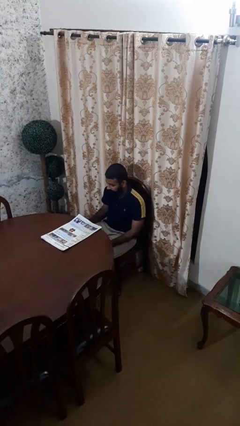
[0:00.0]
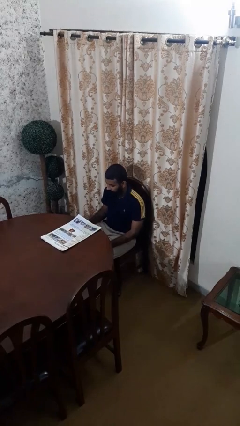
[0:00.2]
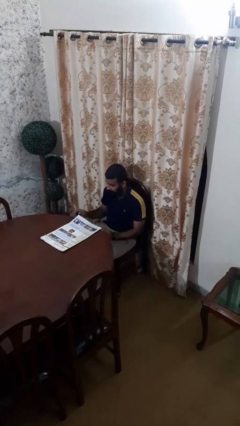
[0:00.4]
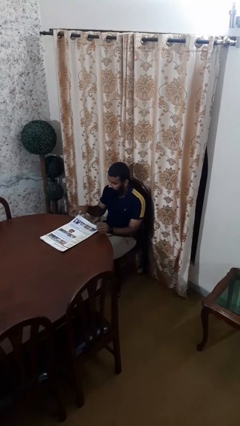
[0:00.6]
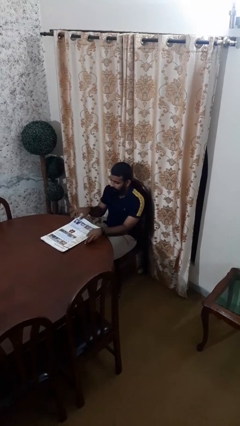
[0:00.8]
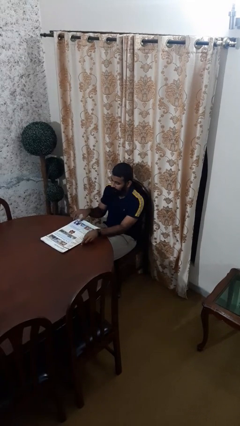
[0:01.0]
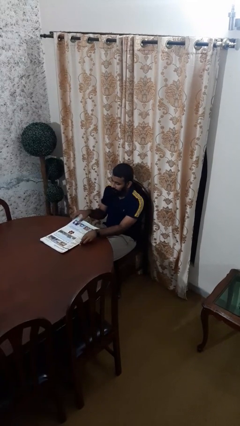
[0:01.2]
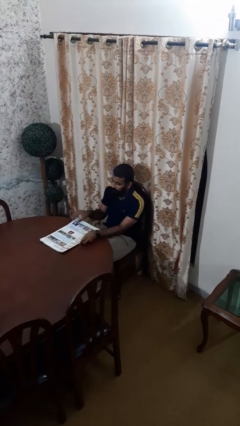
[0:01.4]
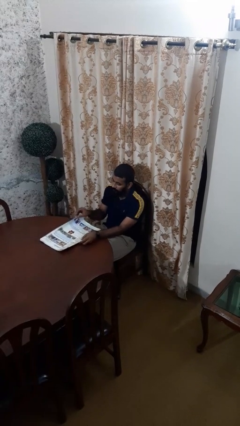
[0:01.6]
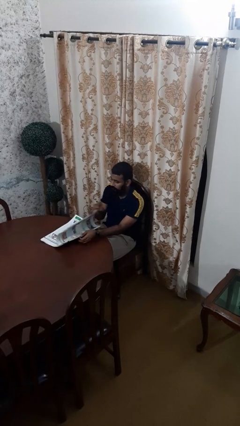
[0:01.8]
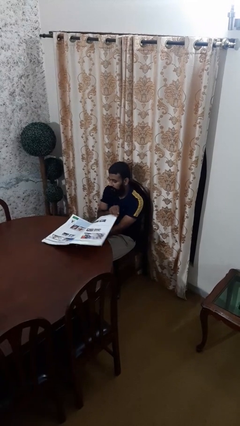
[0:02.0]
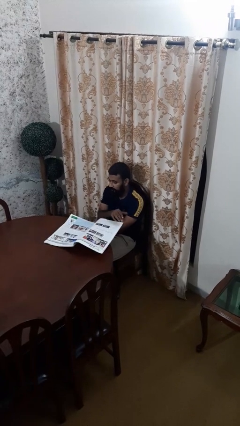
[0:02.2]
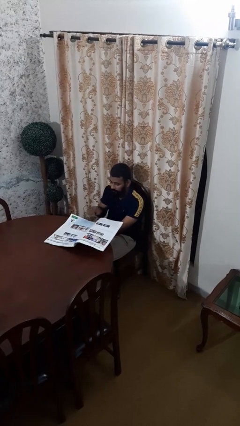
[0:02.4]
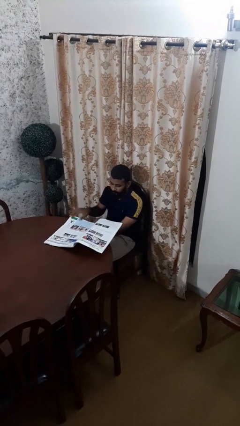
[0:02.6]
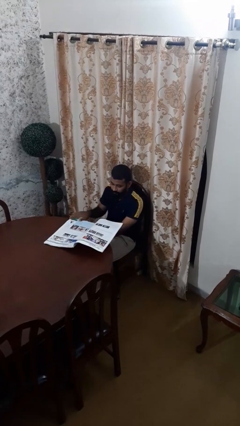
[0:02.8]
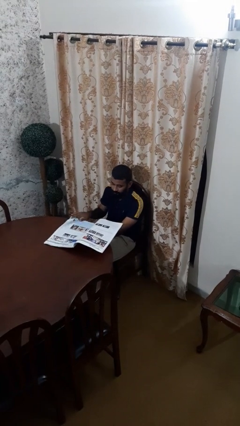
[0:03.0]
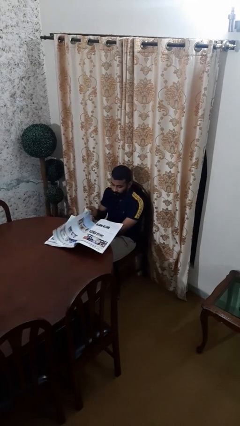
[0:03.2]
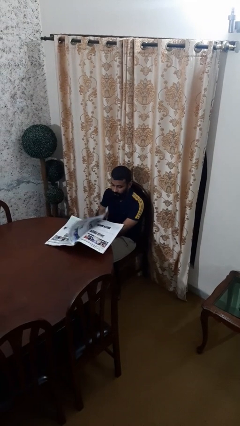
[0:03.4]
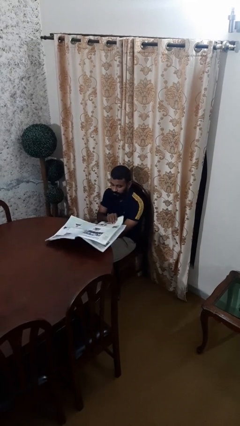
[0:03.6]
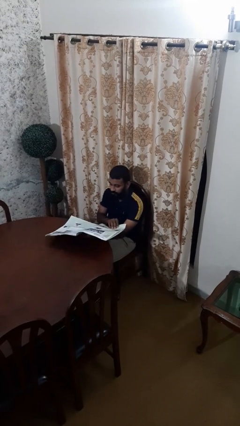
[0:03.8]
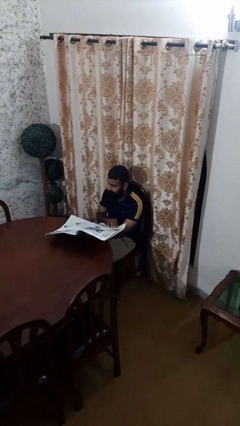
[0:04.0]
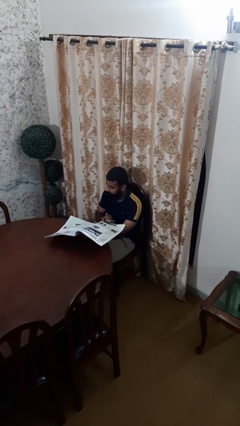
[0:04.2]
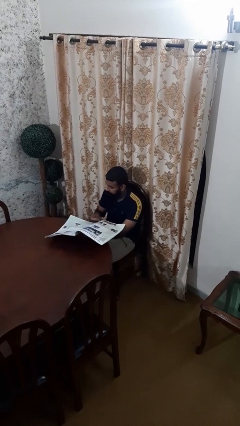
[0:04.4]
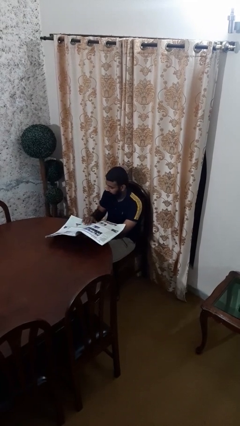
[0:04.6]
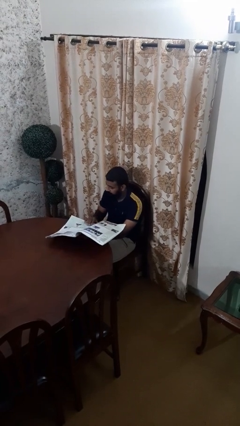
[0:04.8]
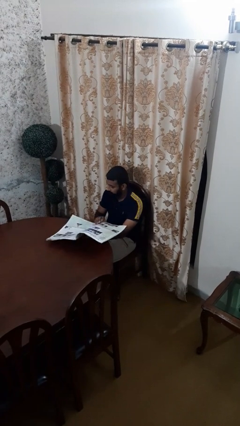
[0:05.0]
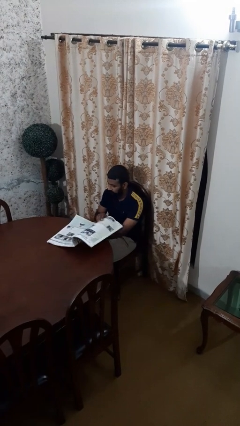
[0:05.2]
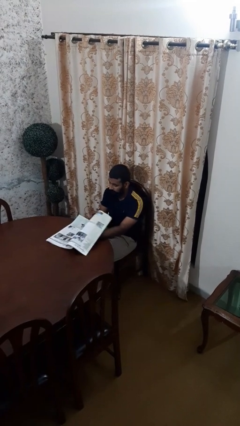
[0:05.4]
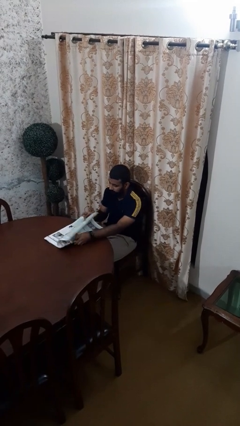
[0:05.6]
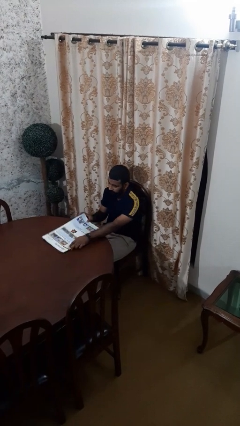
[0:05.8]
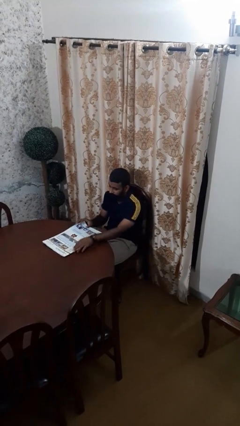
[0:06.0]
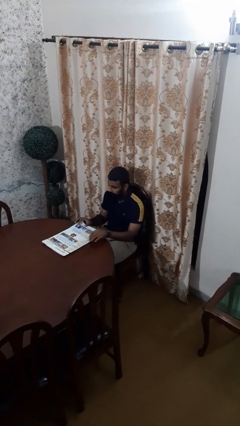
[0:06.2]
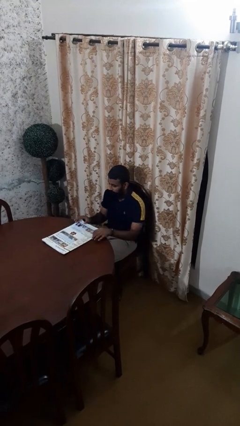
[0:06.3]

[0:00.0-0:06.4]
person reads magazine

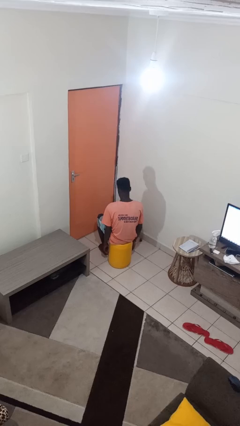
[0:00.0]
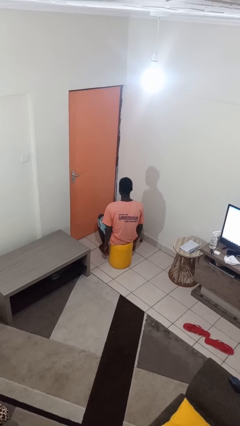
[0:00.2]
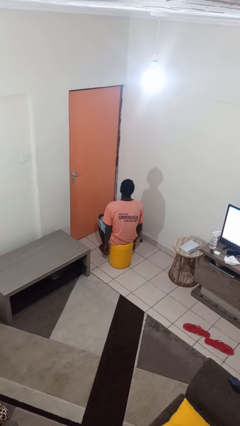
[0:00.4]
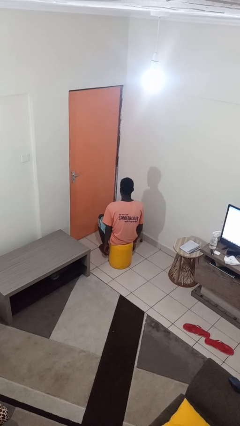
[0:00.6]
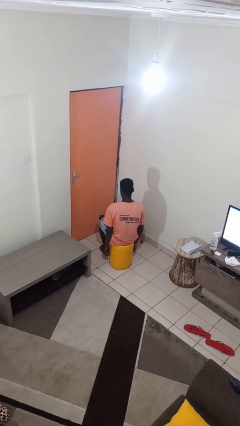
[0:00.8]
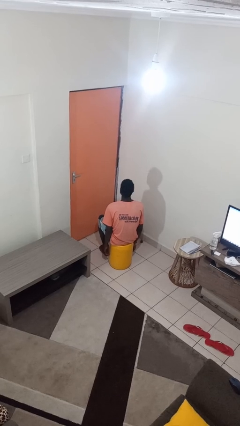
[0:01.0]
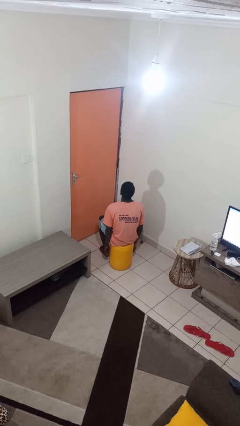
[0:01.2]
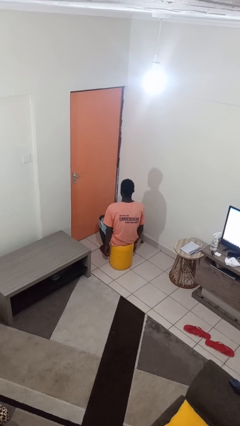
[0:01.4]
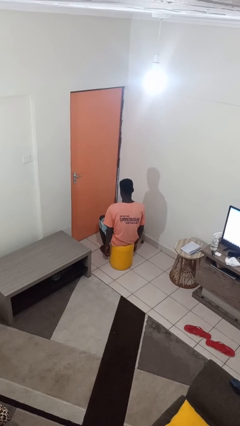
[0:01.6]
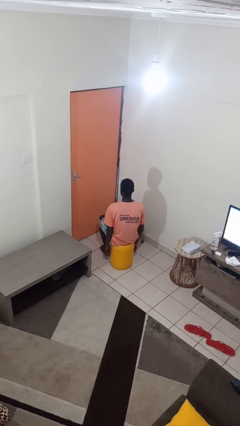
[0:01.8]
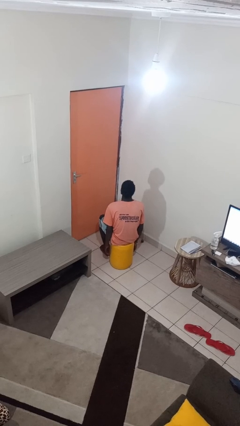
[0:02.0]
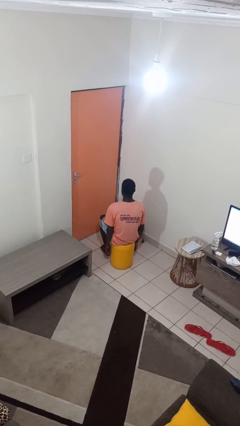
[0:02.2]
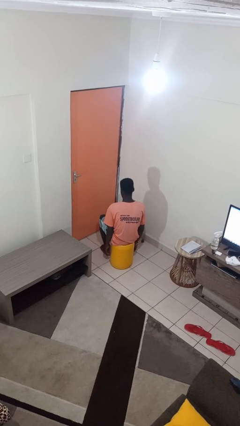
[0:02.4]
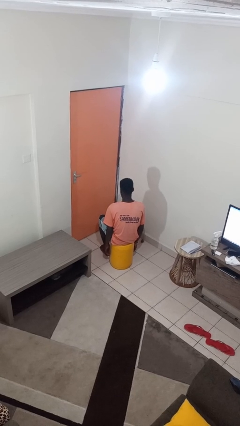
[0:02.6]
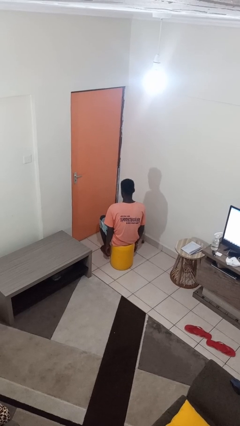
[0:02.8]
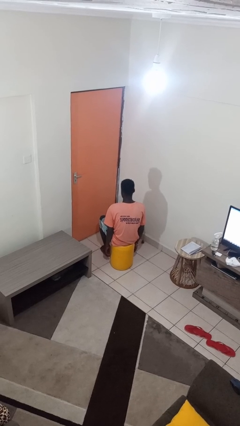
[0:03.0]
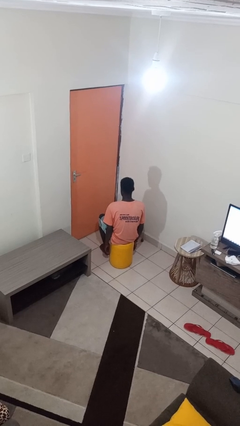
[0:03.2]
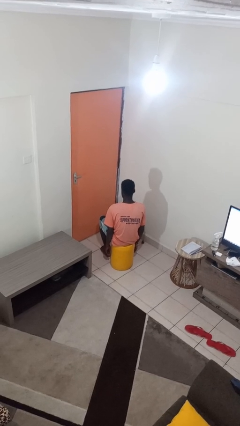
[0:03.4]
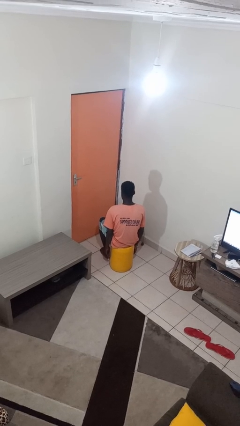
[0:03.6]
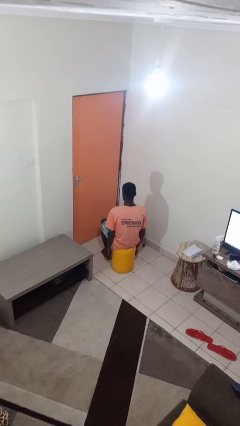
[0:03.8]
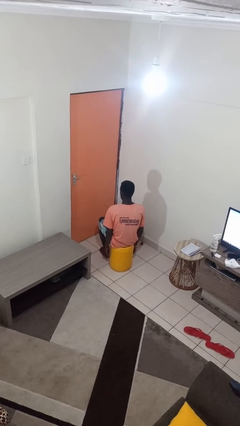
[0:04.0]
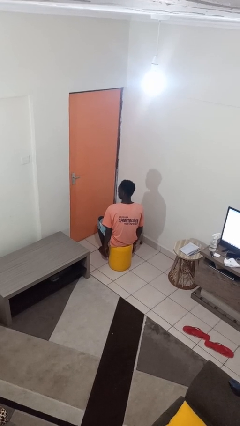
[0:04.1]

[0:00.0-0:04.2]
person nods head

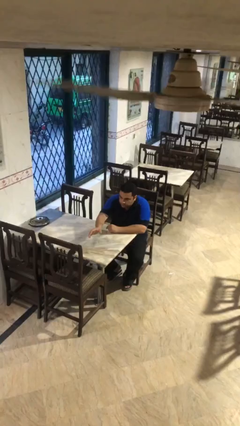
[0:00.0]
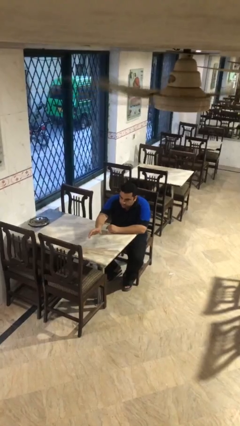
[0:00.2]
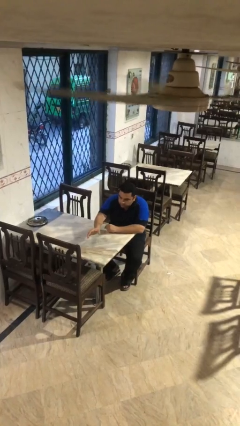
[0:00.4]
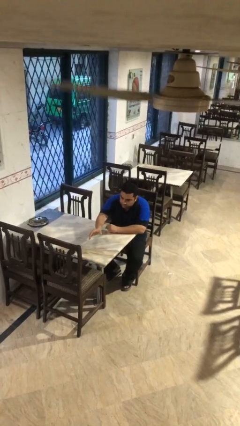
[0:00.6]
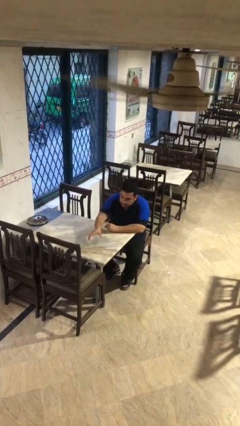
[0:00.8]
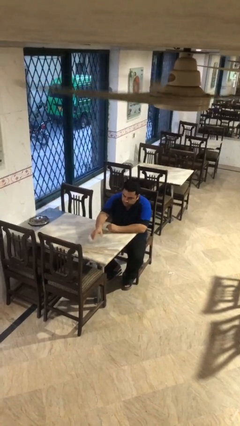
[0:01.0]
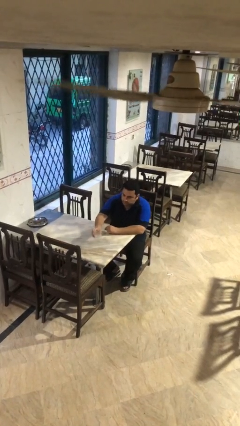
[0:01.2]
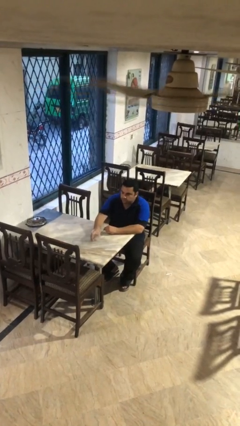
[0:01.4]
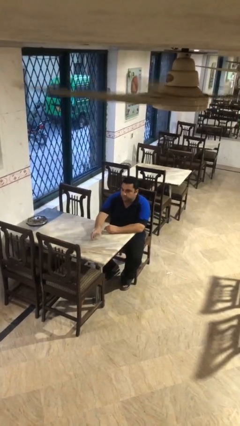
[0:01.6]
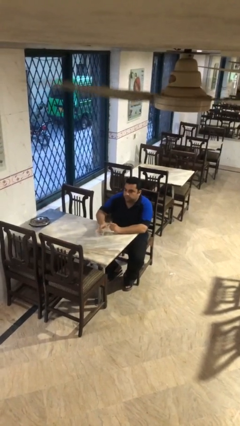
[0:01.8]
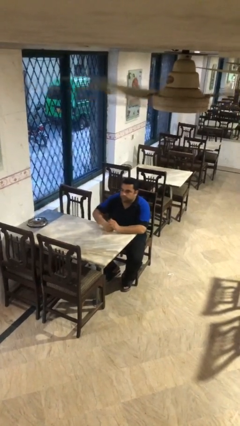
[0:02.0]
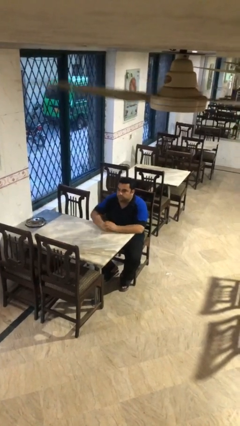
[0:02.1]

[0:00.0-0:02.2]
person sets upright glass

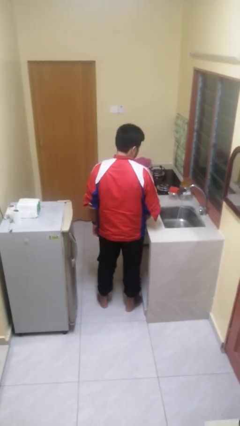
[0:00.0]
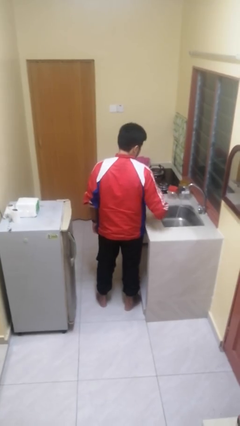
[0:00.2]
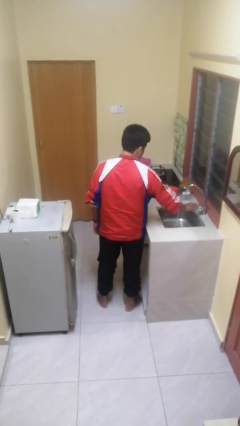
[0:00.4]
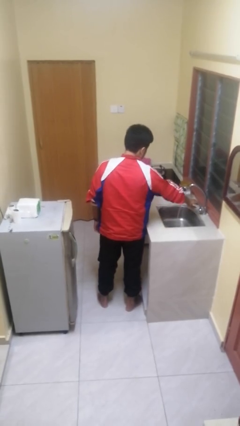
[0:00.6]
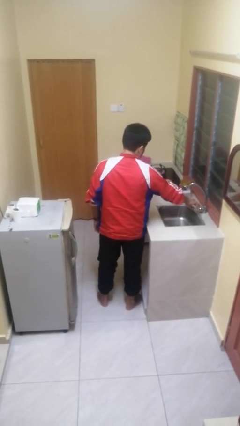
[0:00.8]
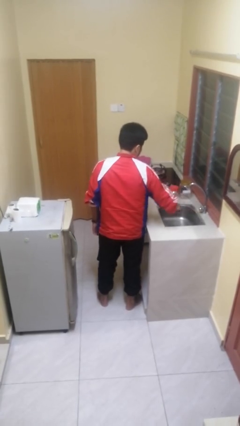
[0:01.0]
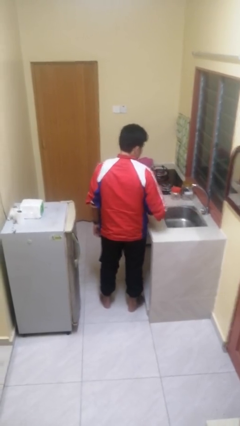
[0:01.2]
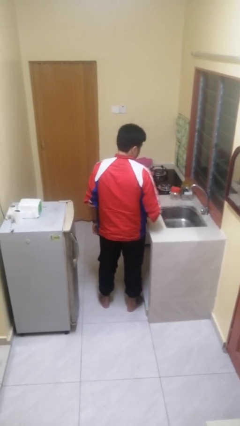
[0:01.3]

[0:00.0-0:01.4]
person turns off faucet

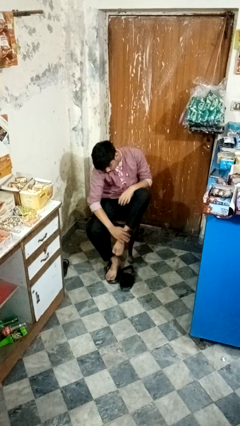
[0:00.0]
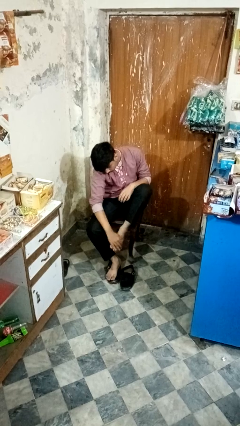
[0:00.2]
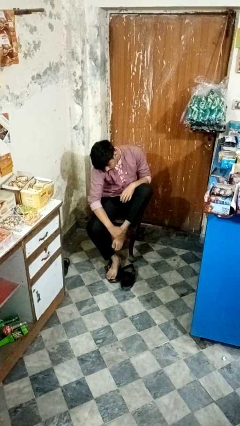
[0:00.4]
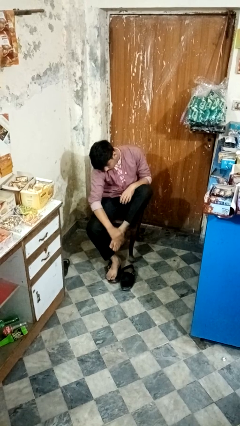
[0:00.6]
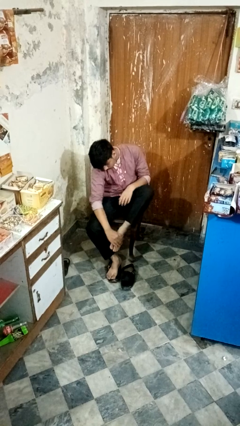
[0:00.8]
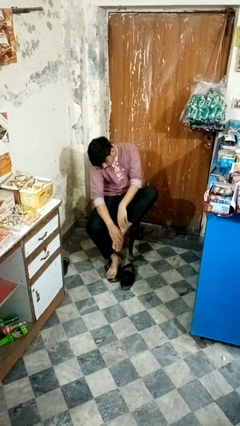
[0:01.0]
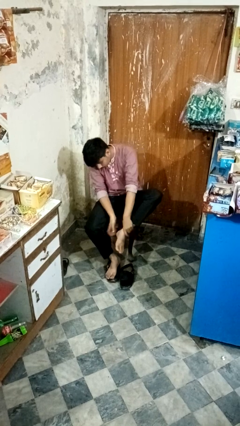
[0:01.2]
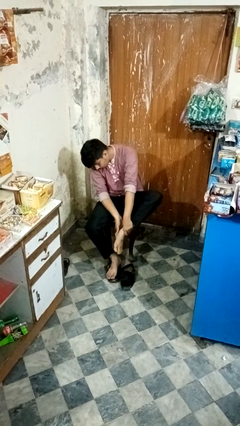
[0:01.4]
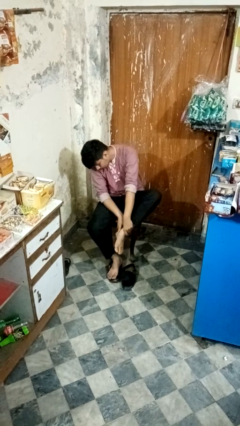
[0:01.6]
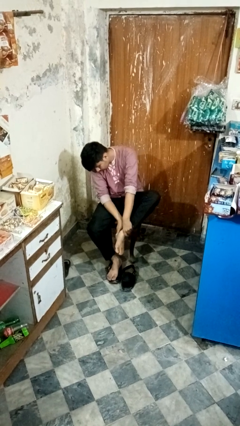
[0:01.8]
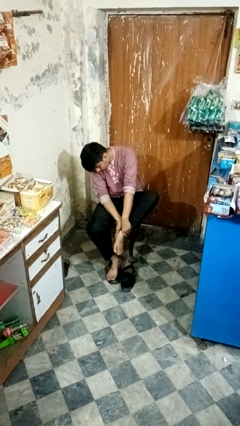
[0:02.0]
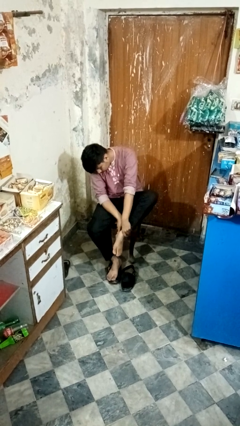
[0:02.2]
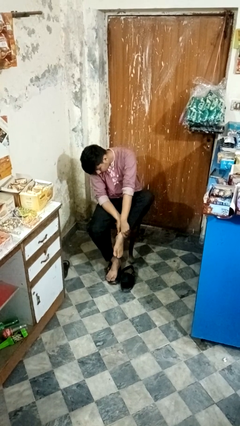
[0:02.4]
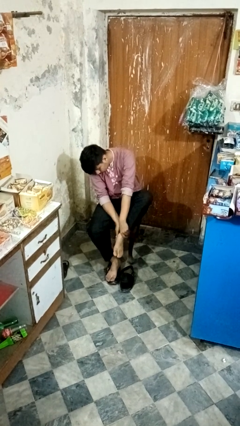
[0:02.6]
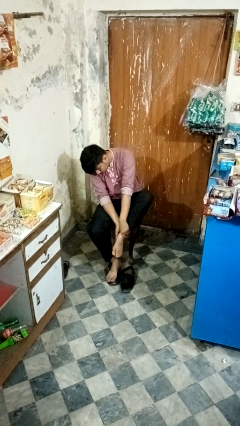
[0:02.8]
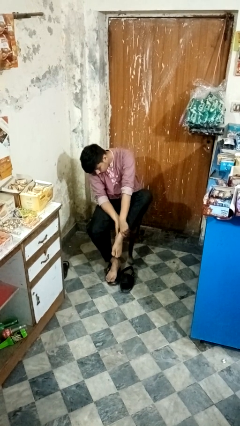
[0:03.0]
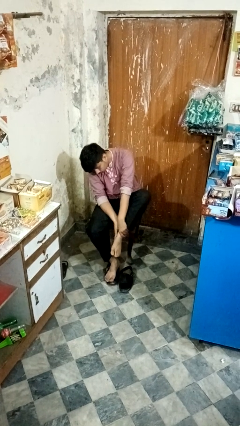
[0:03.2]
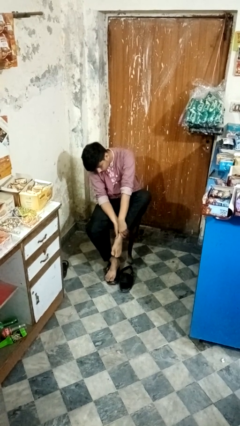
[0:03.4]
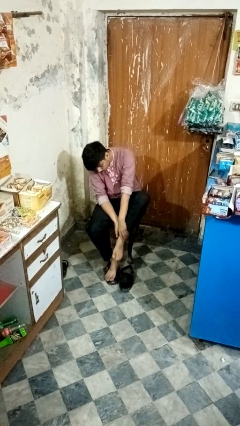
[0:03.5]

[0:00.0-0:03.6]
person rubs foot

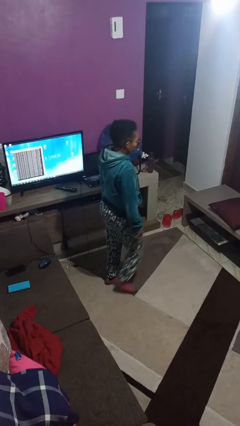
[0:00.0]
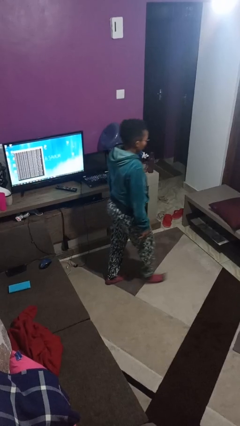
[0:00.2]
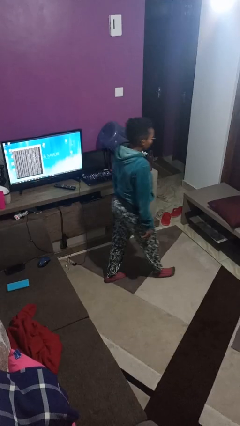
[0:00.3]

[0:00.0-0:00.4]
person picks up object from table
